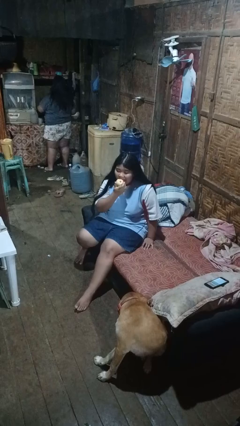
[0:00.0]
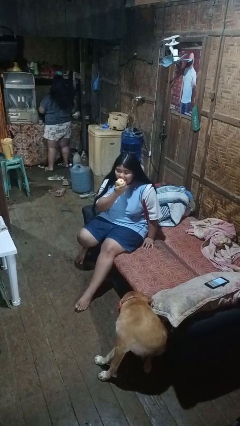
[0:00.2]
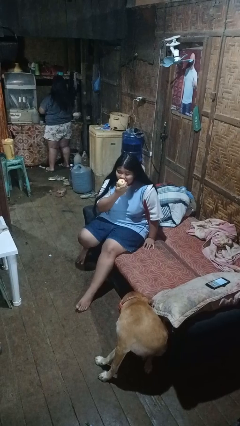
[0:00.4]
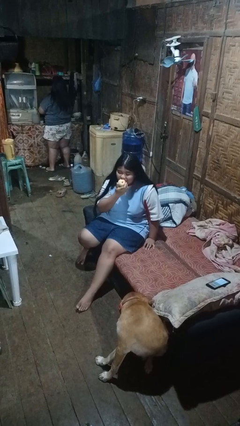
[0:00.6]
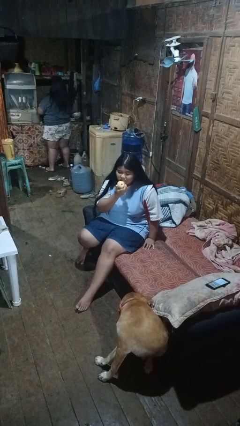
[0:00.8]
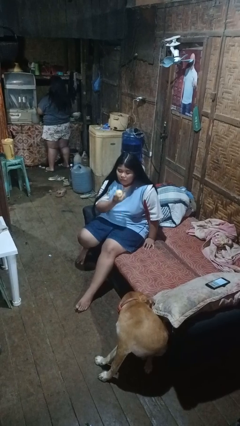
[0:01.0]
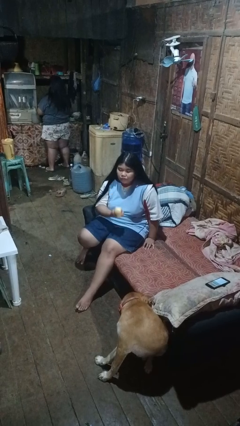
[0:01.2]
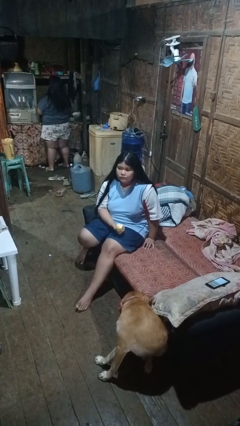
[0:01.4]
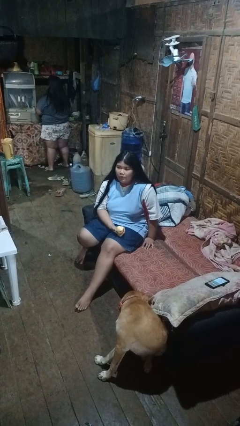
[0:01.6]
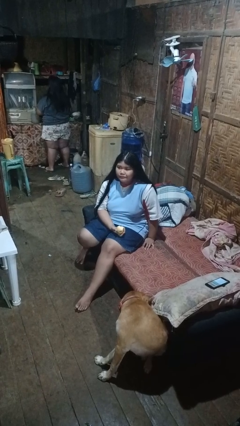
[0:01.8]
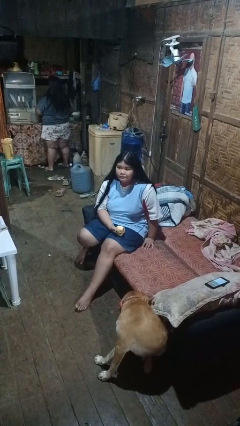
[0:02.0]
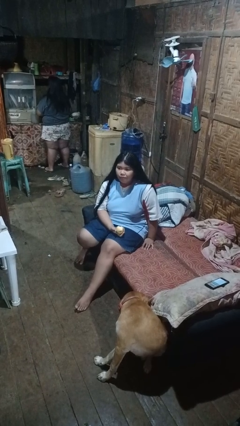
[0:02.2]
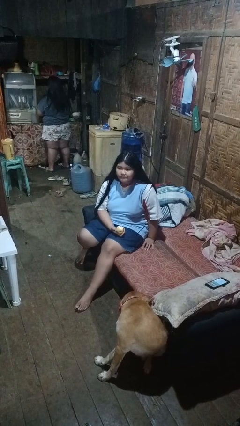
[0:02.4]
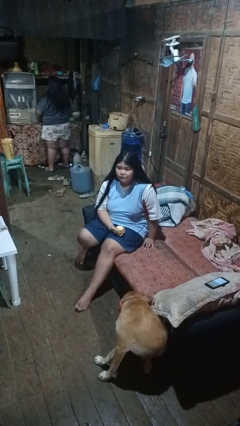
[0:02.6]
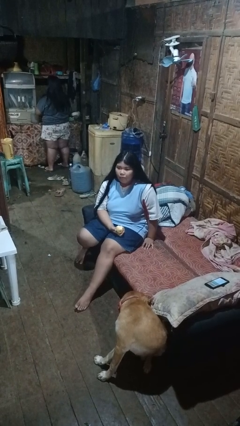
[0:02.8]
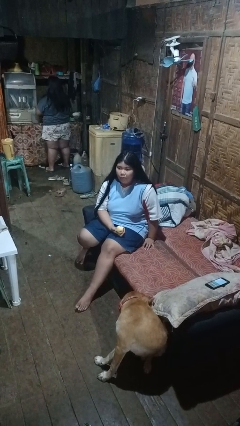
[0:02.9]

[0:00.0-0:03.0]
person eats apple

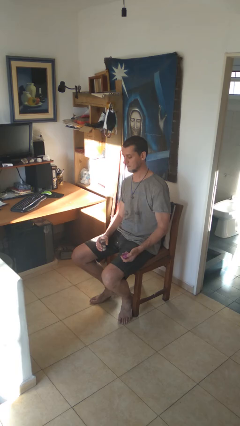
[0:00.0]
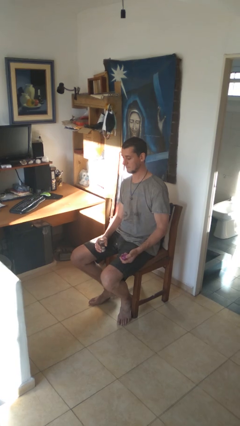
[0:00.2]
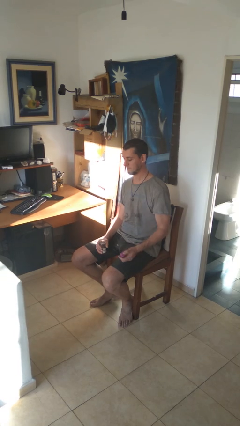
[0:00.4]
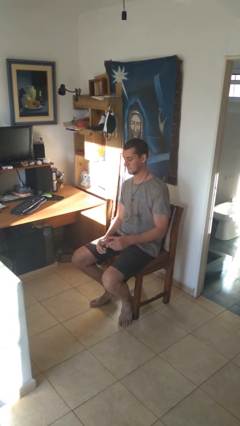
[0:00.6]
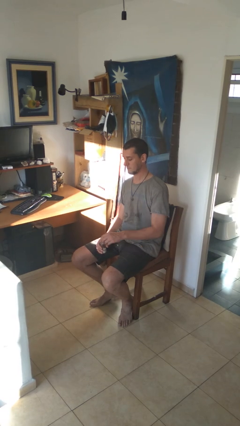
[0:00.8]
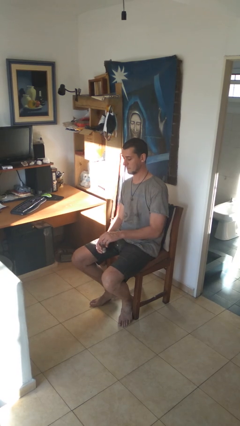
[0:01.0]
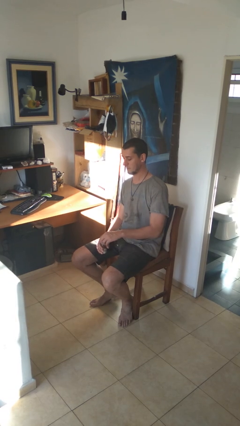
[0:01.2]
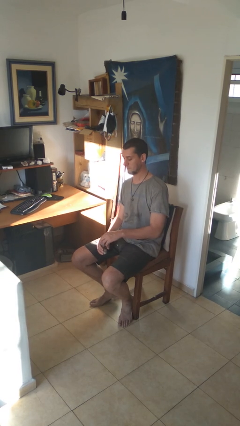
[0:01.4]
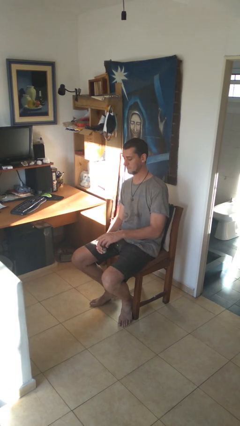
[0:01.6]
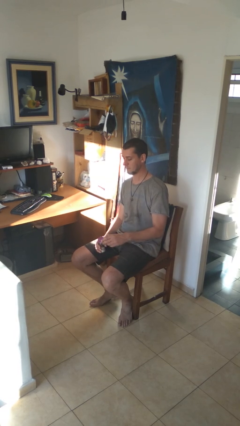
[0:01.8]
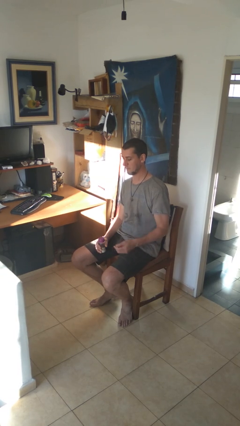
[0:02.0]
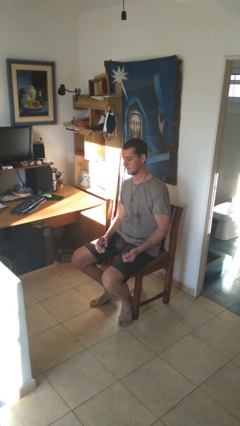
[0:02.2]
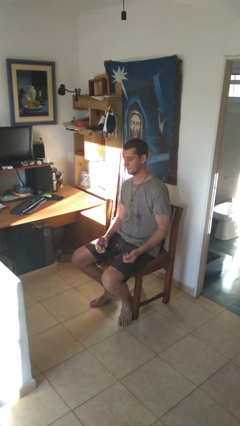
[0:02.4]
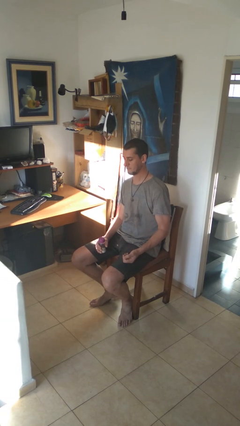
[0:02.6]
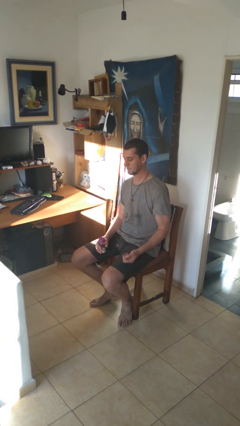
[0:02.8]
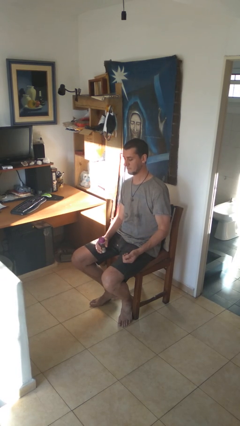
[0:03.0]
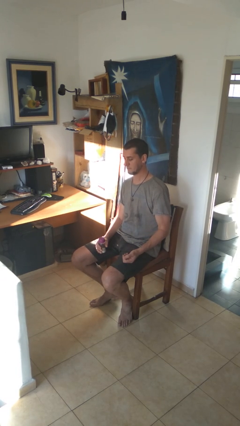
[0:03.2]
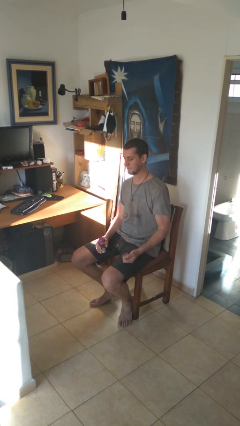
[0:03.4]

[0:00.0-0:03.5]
person closes jar

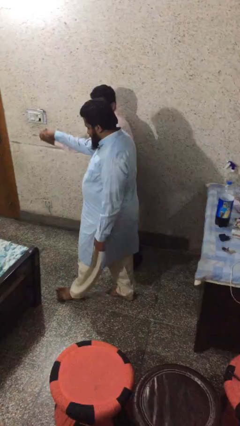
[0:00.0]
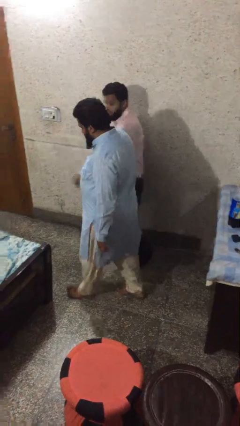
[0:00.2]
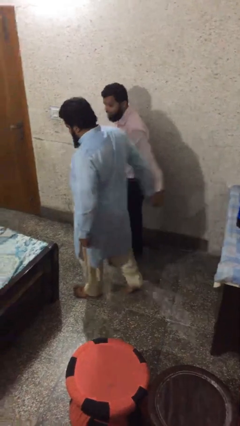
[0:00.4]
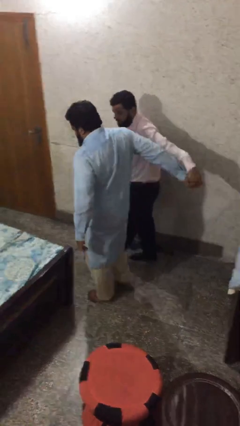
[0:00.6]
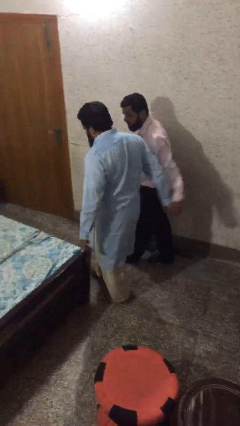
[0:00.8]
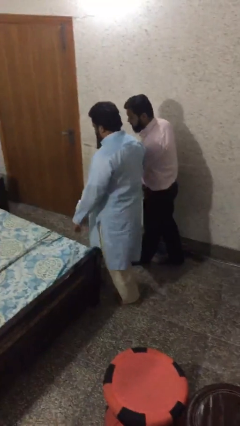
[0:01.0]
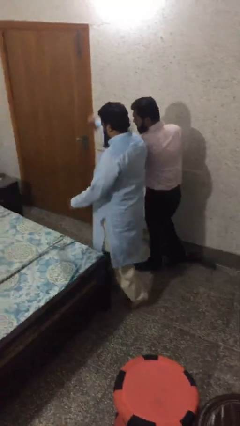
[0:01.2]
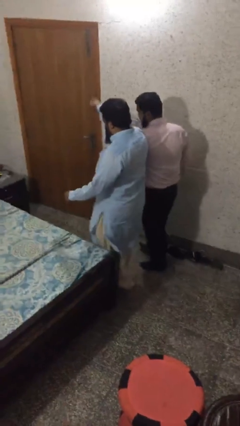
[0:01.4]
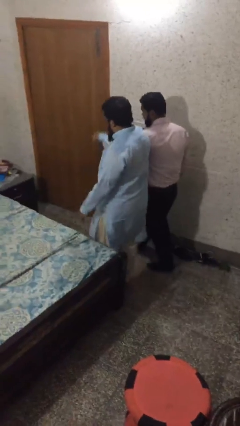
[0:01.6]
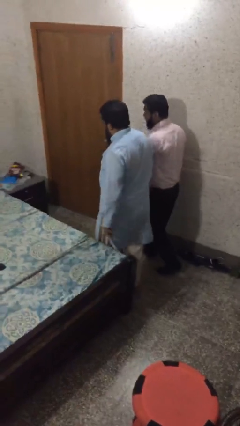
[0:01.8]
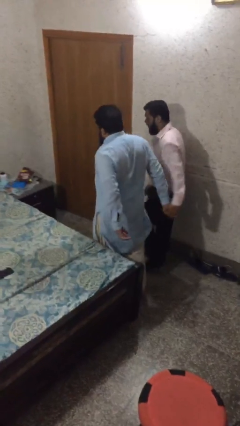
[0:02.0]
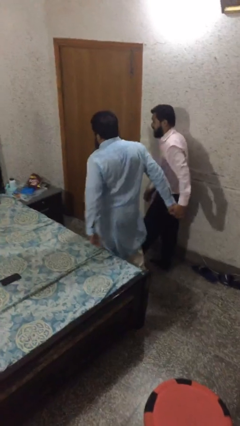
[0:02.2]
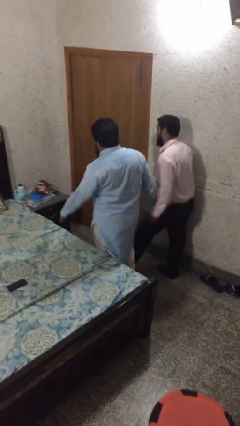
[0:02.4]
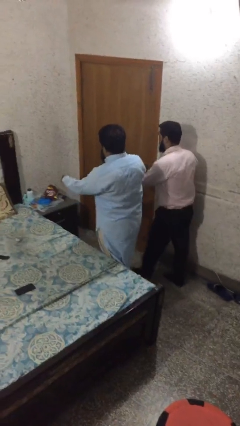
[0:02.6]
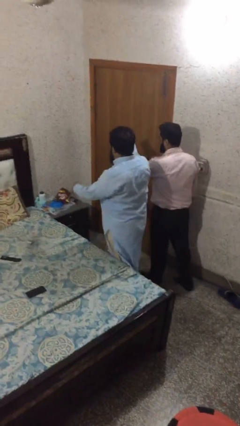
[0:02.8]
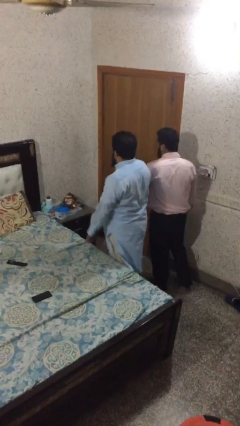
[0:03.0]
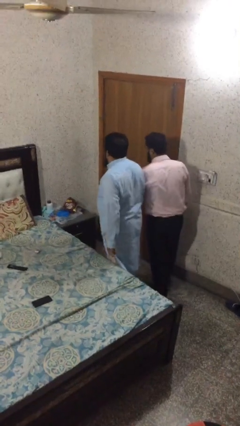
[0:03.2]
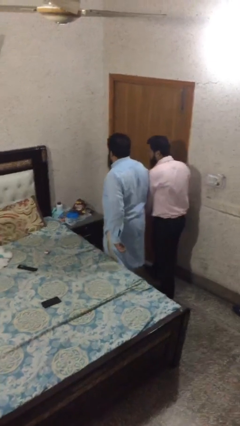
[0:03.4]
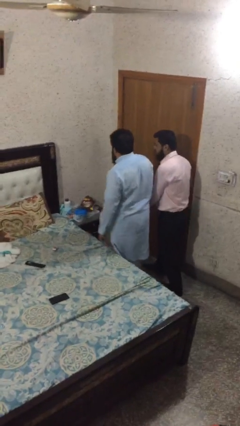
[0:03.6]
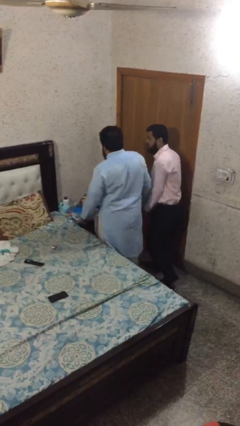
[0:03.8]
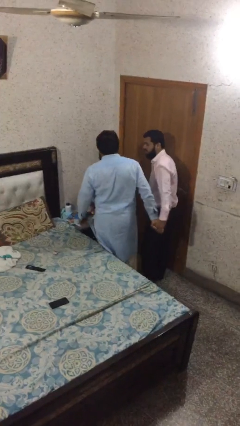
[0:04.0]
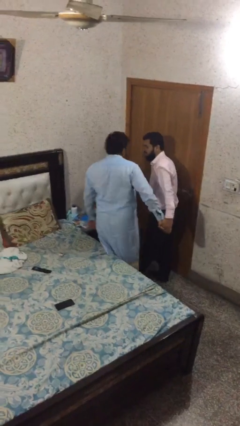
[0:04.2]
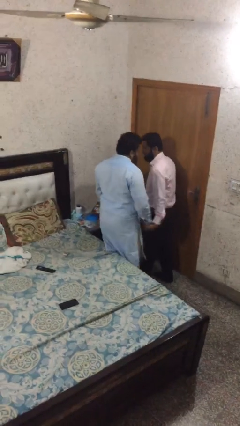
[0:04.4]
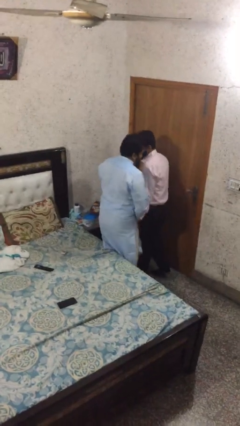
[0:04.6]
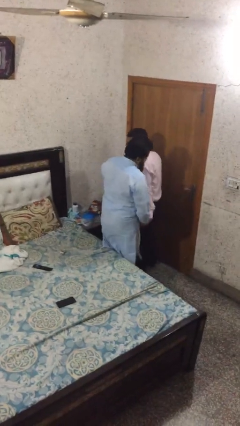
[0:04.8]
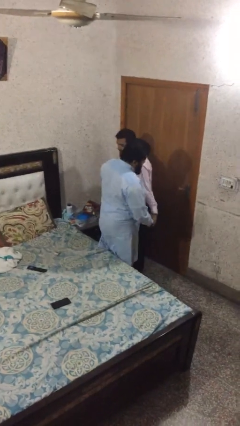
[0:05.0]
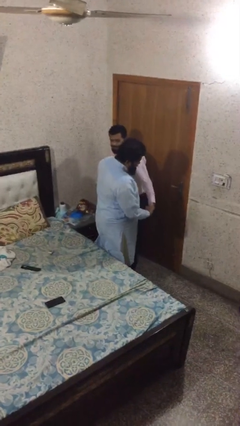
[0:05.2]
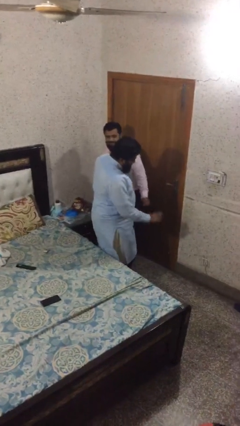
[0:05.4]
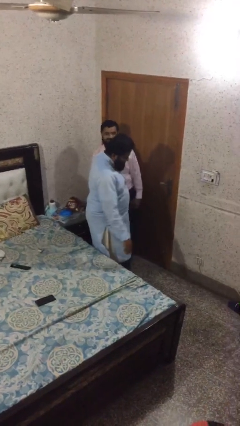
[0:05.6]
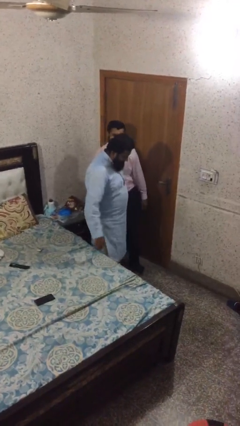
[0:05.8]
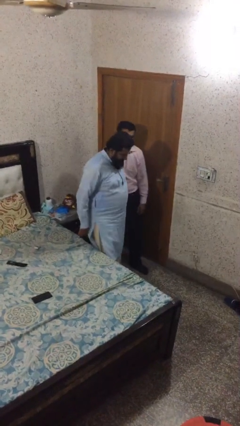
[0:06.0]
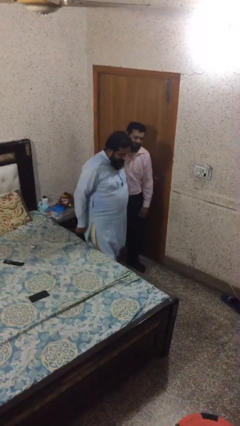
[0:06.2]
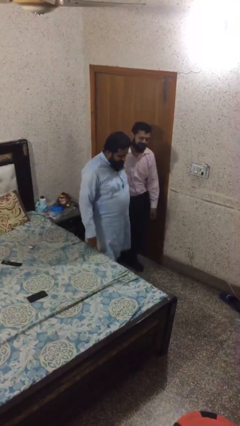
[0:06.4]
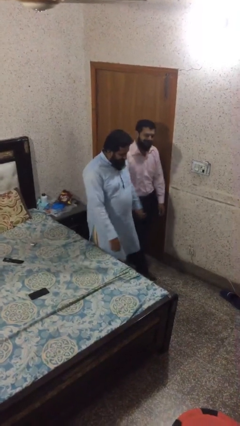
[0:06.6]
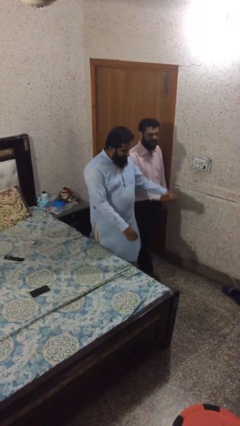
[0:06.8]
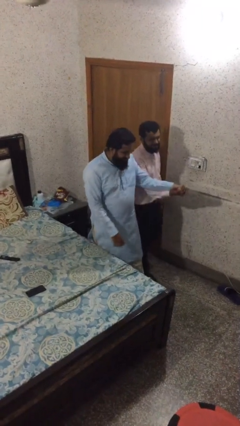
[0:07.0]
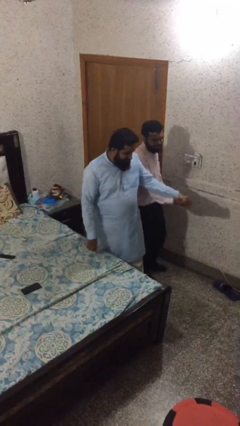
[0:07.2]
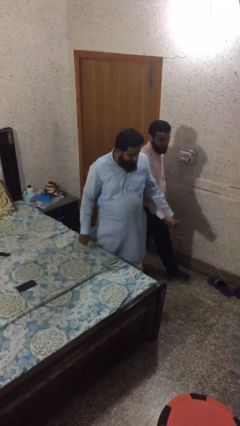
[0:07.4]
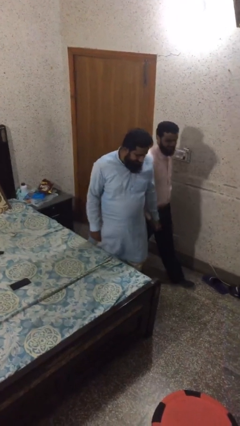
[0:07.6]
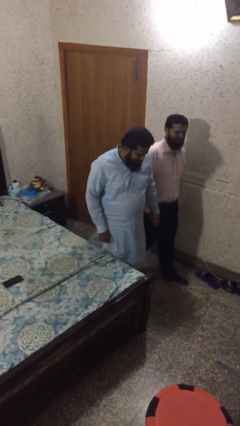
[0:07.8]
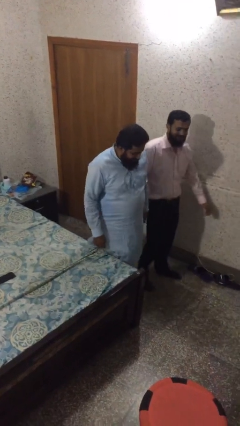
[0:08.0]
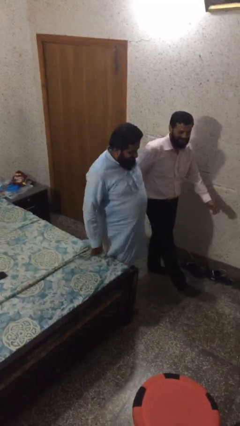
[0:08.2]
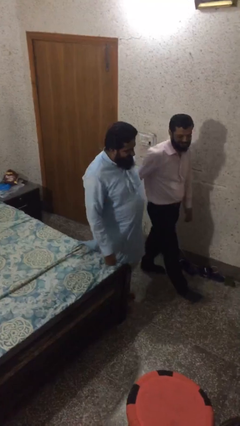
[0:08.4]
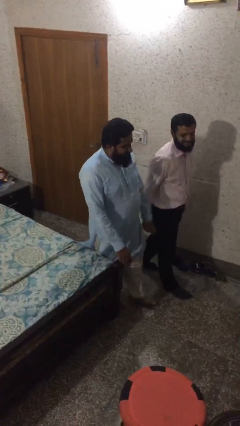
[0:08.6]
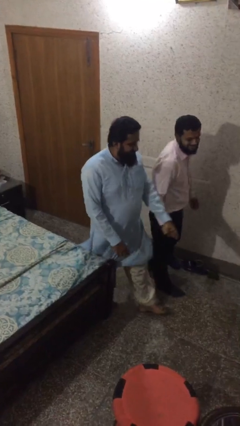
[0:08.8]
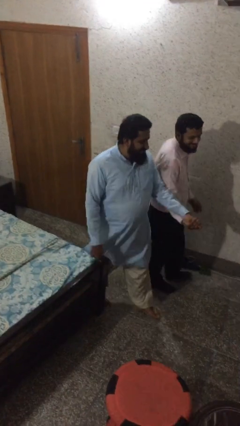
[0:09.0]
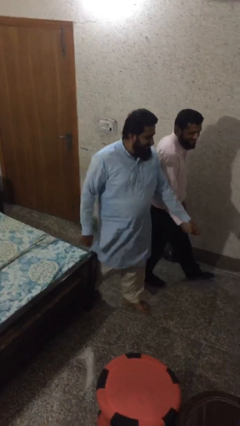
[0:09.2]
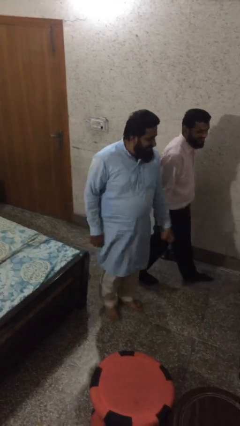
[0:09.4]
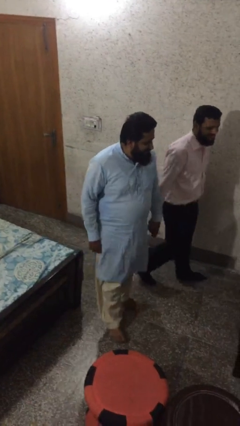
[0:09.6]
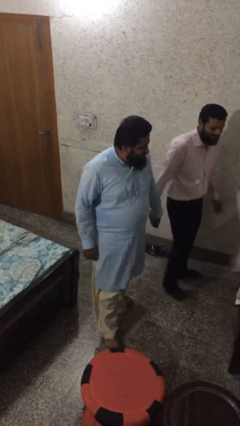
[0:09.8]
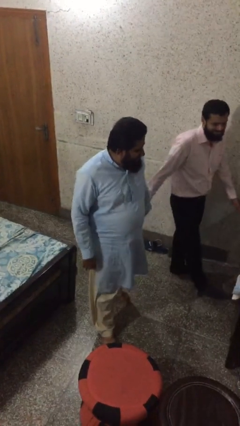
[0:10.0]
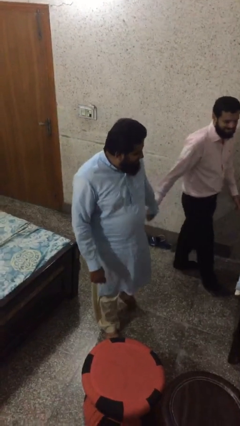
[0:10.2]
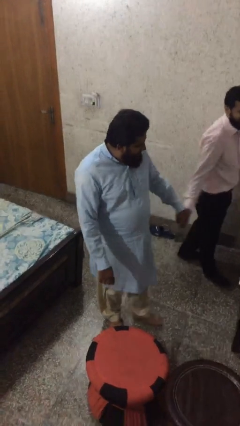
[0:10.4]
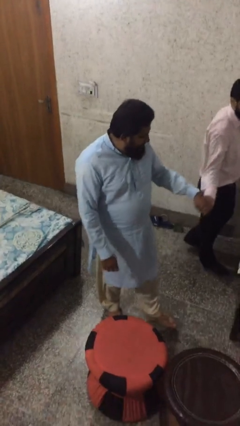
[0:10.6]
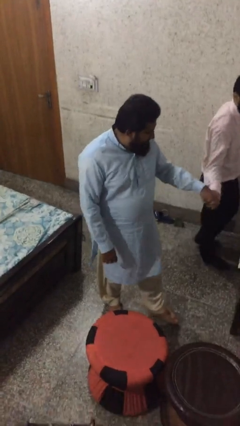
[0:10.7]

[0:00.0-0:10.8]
person holds hand

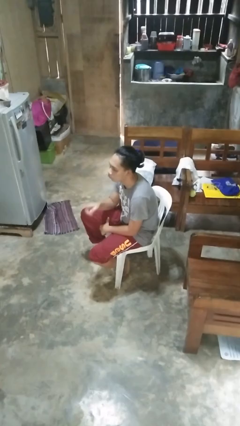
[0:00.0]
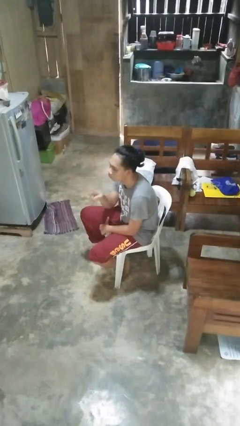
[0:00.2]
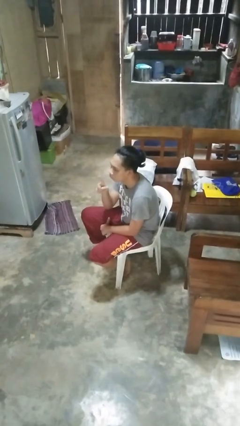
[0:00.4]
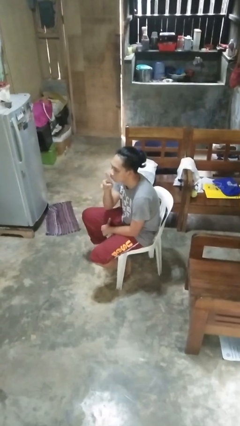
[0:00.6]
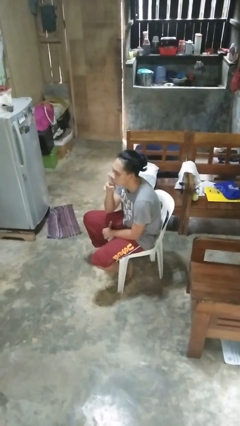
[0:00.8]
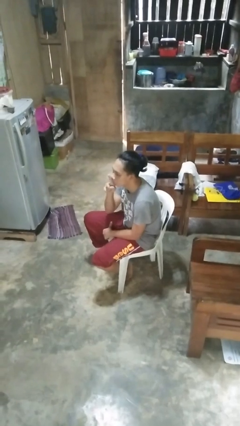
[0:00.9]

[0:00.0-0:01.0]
person gestures be quiet
